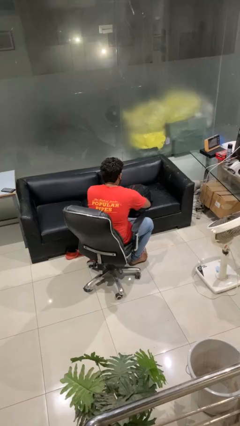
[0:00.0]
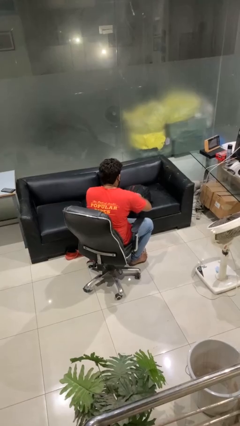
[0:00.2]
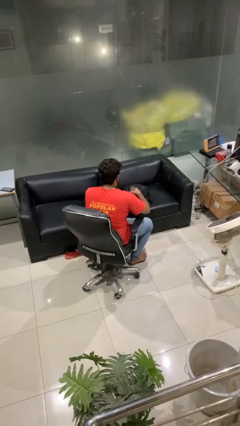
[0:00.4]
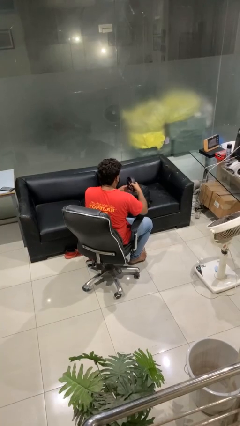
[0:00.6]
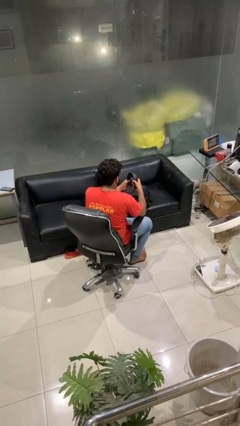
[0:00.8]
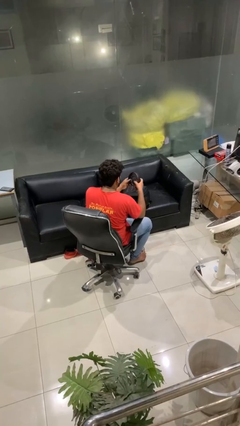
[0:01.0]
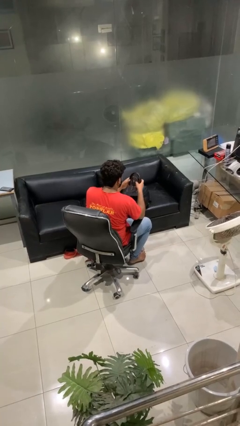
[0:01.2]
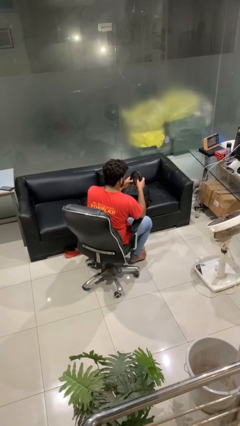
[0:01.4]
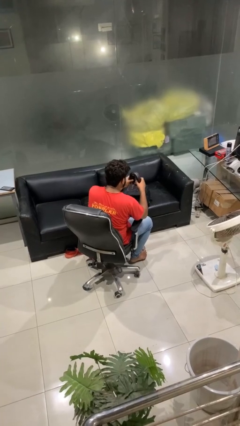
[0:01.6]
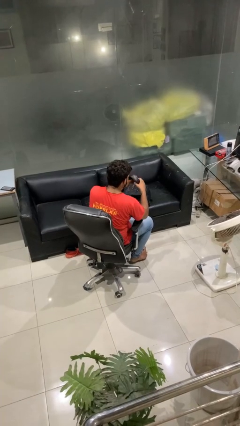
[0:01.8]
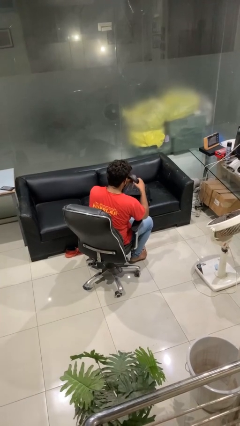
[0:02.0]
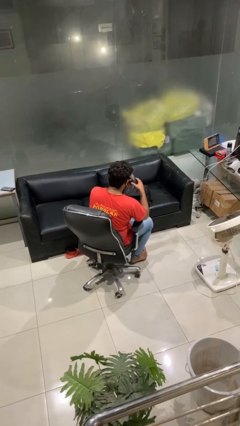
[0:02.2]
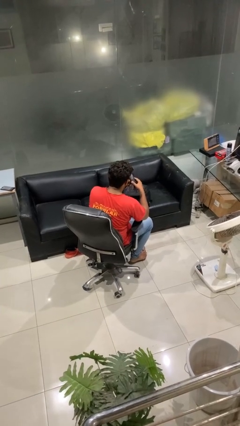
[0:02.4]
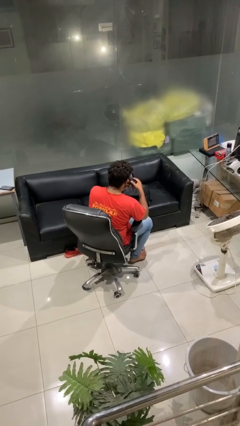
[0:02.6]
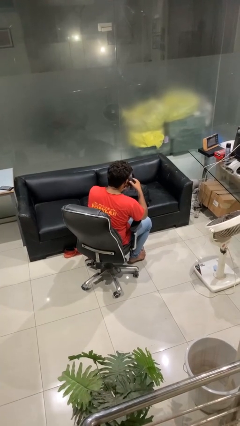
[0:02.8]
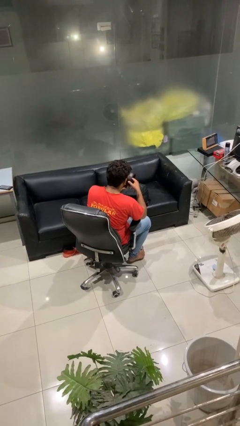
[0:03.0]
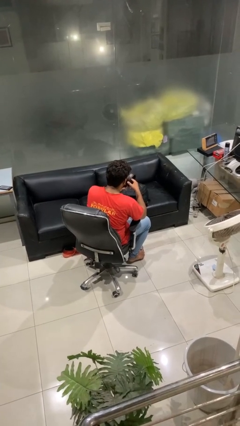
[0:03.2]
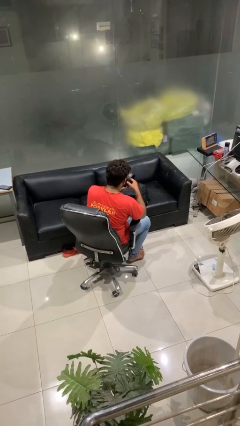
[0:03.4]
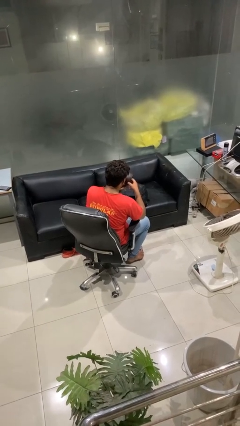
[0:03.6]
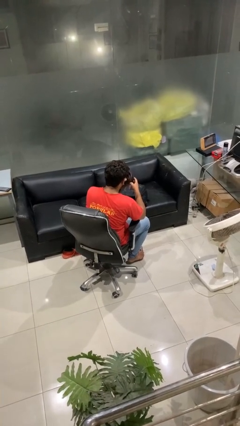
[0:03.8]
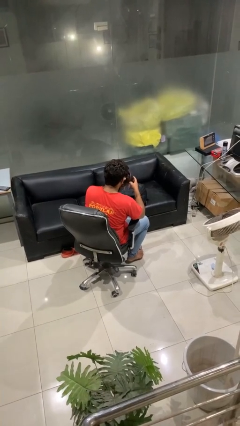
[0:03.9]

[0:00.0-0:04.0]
person takes object from backpack

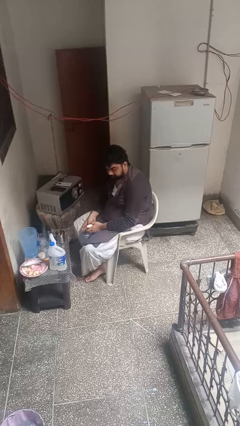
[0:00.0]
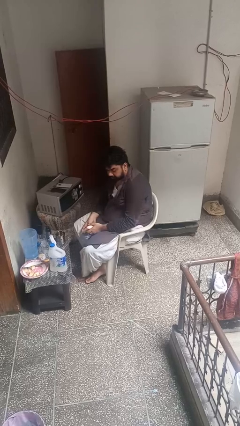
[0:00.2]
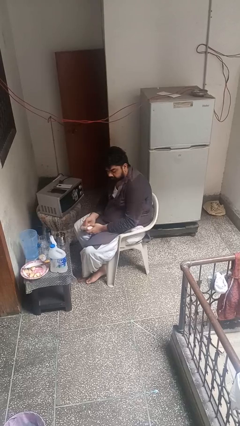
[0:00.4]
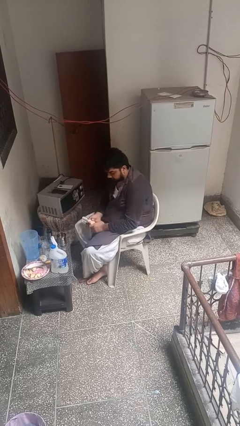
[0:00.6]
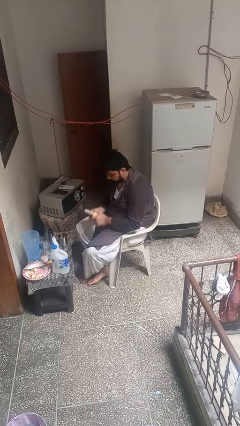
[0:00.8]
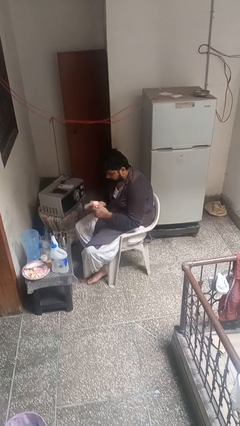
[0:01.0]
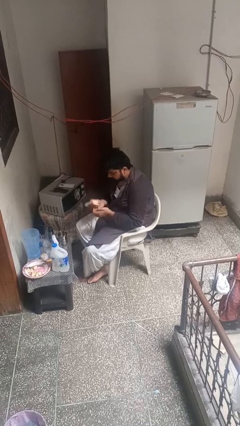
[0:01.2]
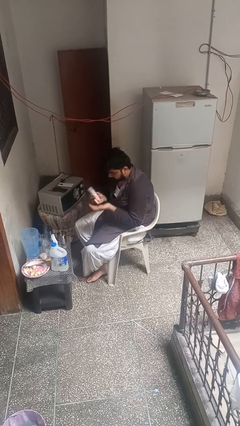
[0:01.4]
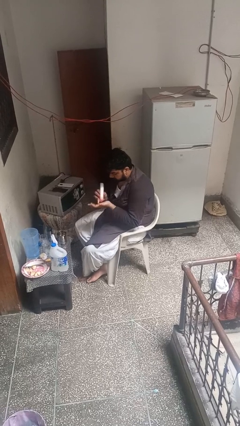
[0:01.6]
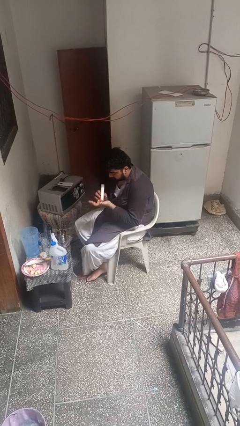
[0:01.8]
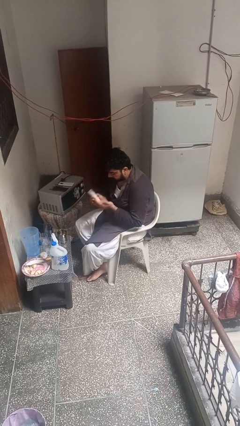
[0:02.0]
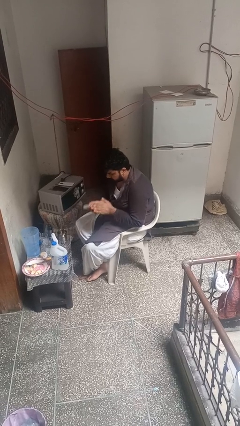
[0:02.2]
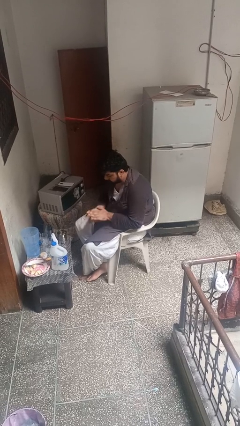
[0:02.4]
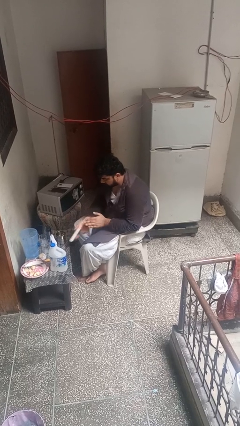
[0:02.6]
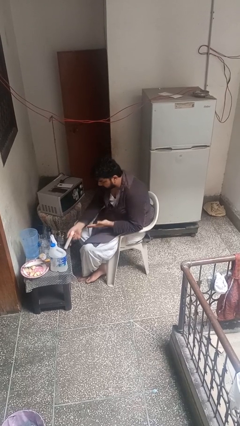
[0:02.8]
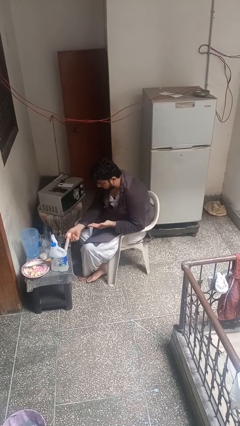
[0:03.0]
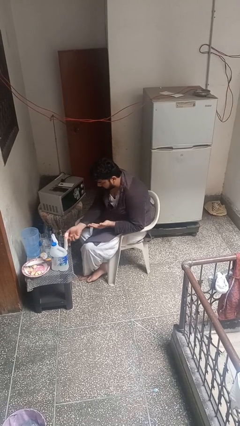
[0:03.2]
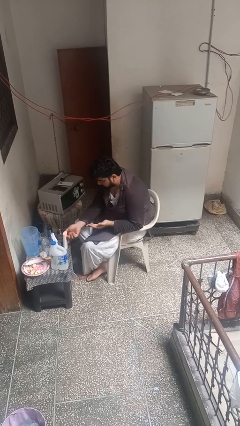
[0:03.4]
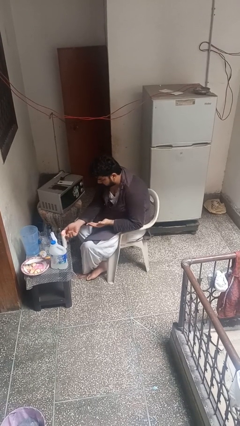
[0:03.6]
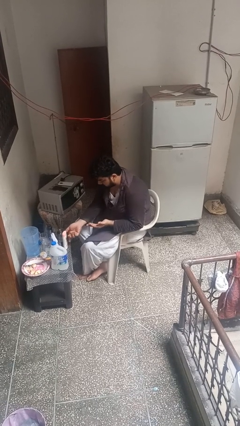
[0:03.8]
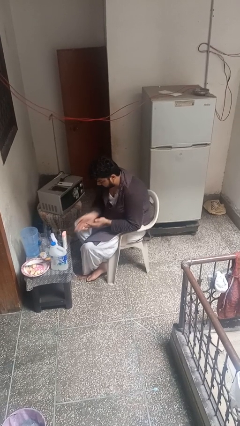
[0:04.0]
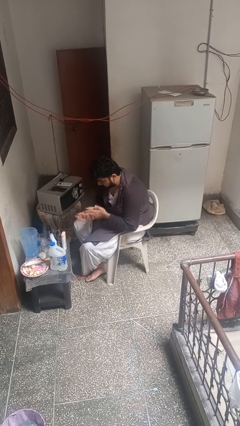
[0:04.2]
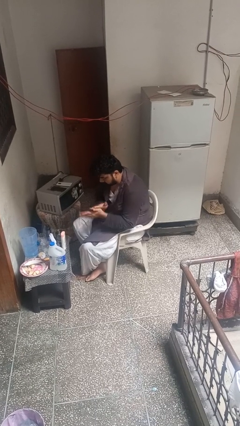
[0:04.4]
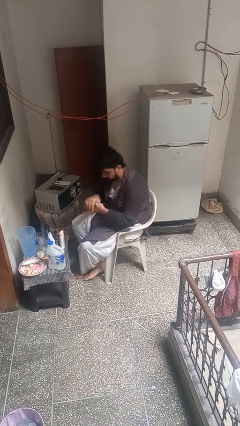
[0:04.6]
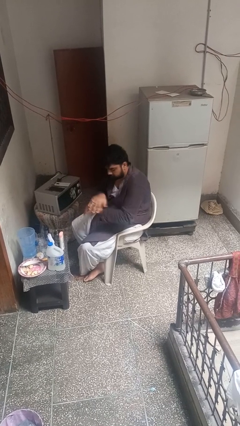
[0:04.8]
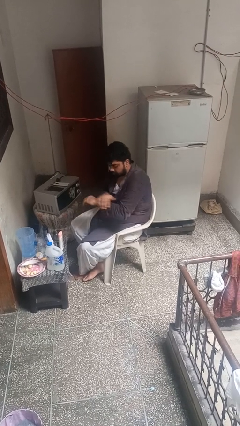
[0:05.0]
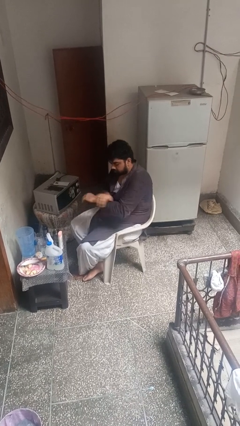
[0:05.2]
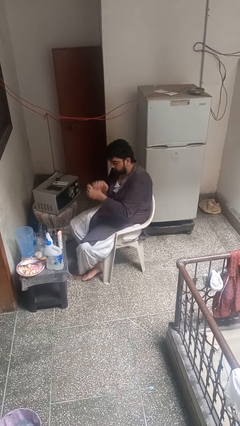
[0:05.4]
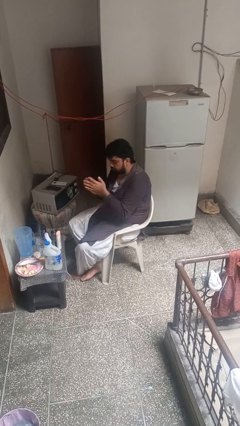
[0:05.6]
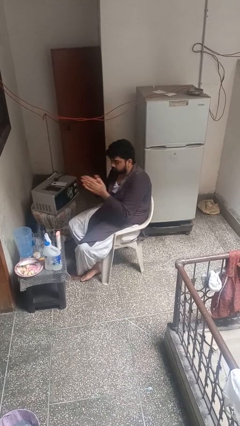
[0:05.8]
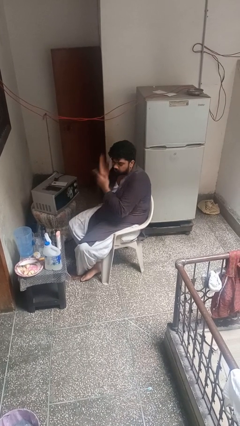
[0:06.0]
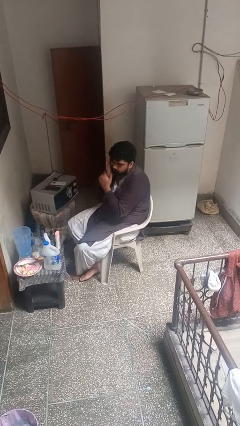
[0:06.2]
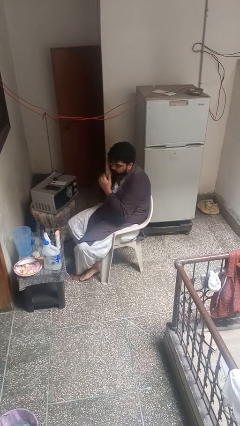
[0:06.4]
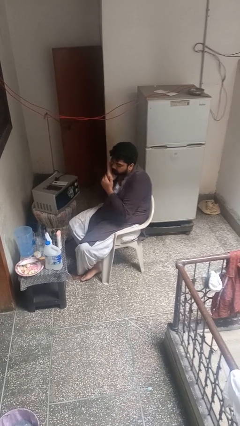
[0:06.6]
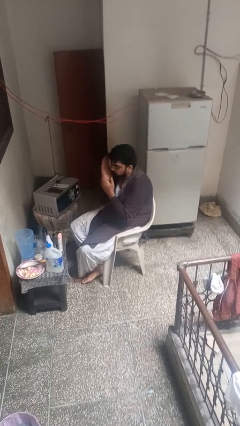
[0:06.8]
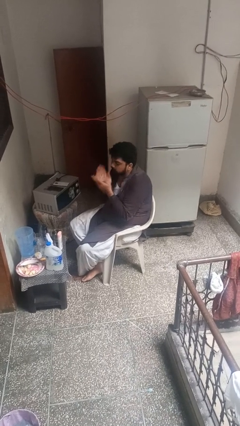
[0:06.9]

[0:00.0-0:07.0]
person applies facial moisturizer

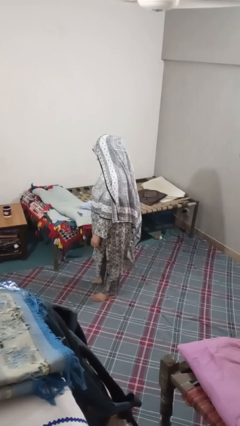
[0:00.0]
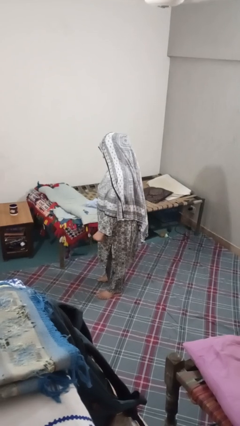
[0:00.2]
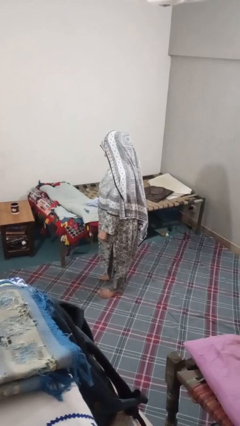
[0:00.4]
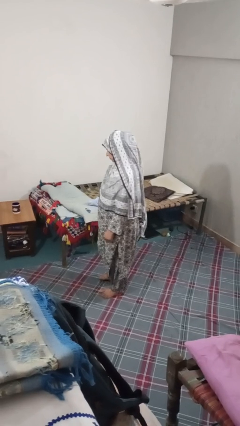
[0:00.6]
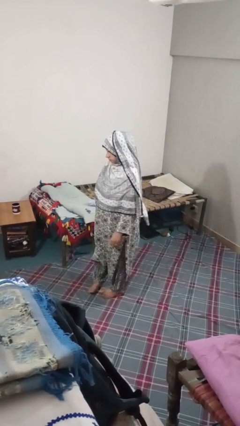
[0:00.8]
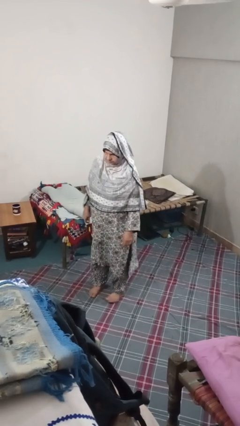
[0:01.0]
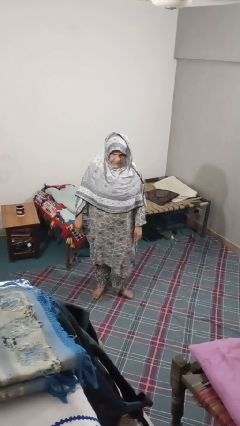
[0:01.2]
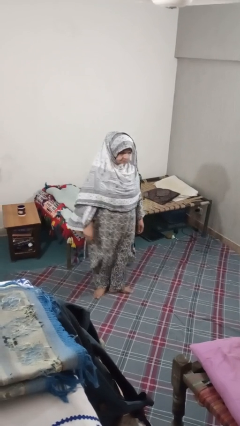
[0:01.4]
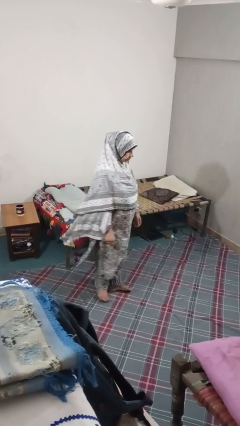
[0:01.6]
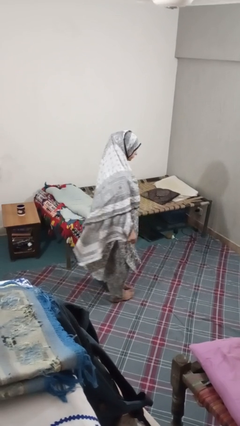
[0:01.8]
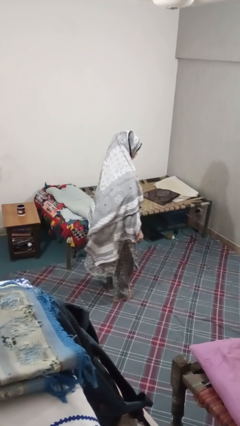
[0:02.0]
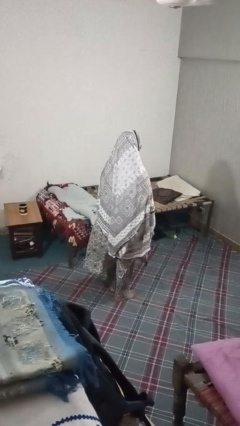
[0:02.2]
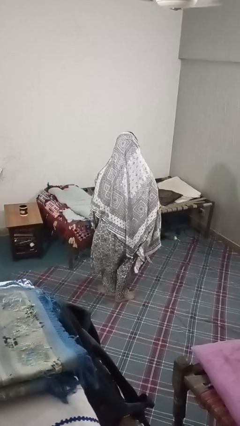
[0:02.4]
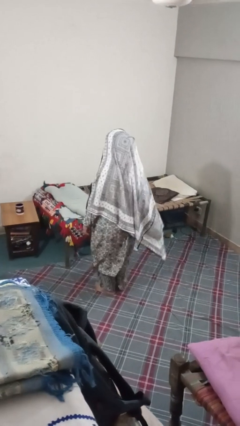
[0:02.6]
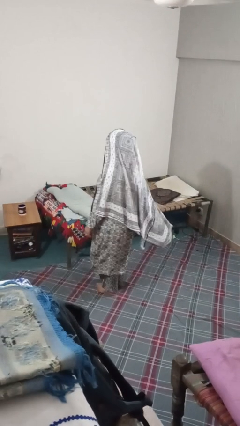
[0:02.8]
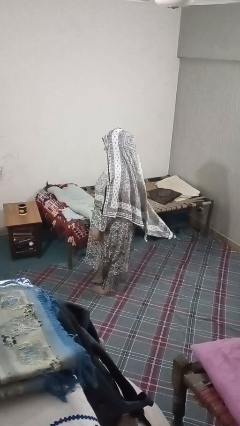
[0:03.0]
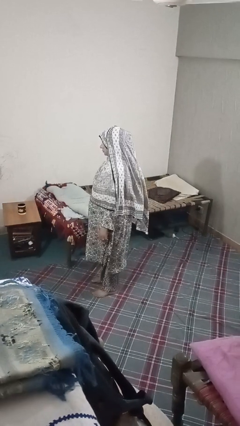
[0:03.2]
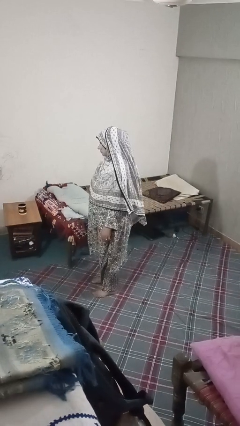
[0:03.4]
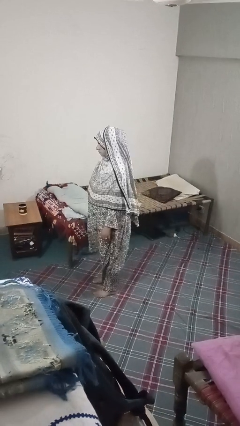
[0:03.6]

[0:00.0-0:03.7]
person twirls

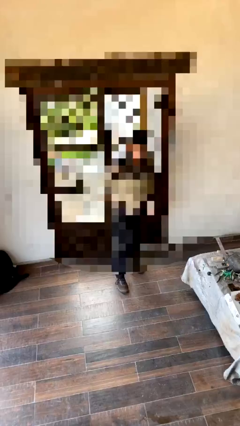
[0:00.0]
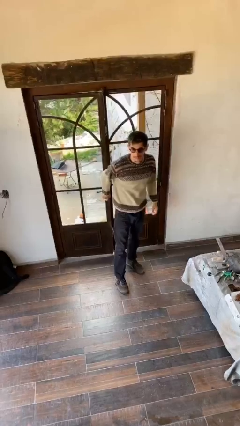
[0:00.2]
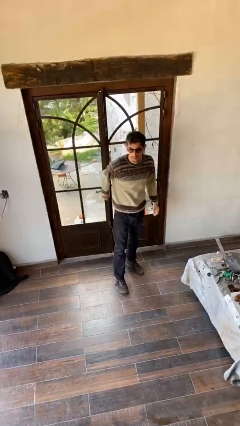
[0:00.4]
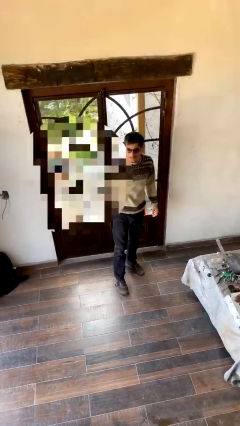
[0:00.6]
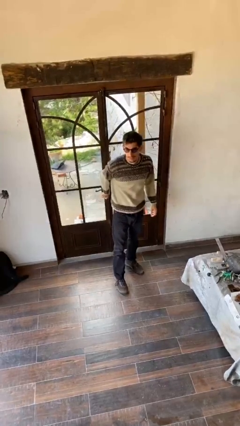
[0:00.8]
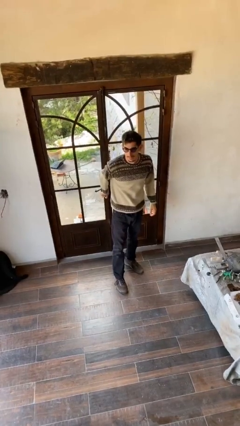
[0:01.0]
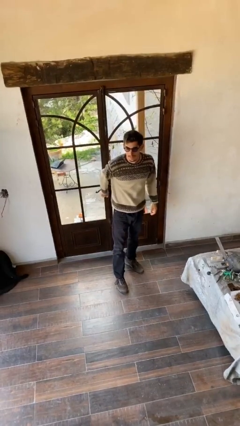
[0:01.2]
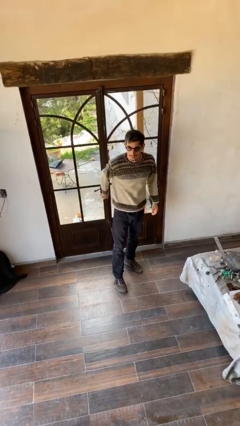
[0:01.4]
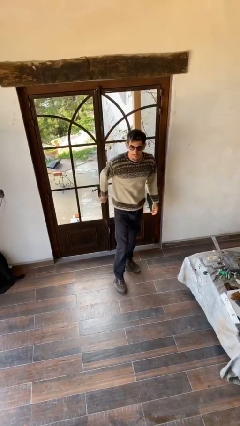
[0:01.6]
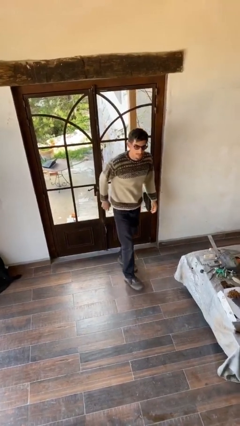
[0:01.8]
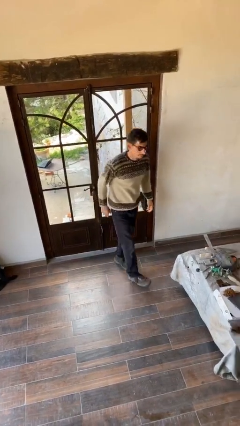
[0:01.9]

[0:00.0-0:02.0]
person closes facility door

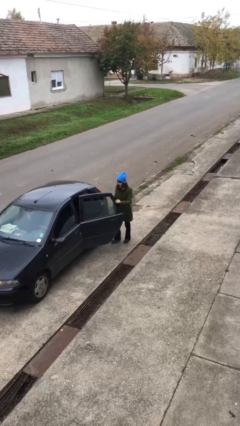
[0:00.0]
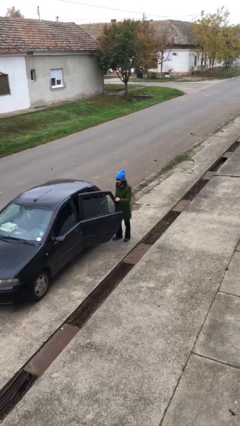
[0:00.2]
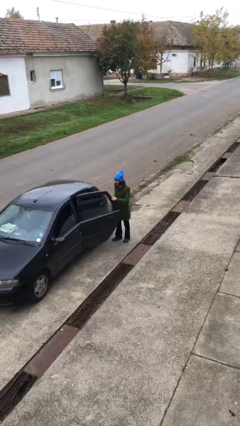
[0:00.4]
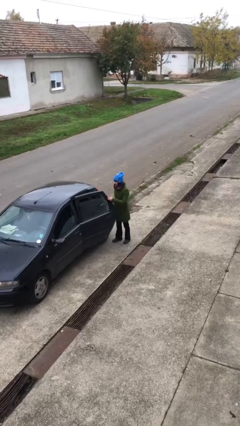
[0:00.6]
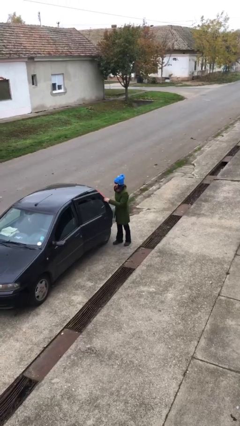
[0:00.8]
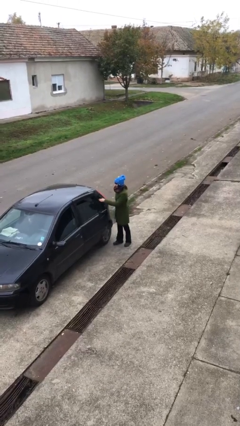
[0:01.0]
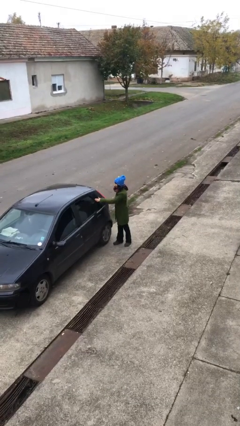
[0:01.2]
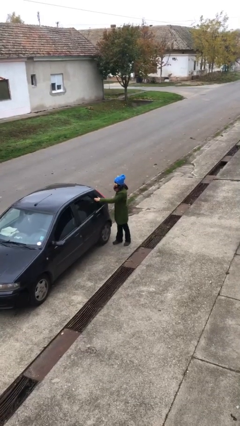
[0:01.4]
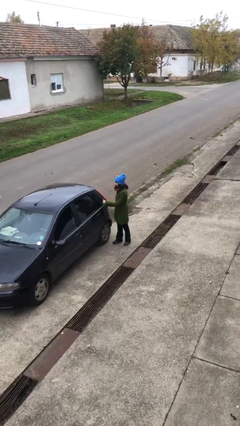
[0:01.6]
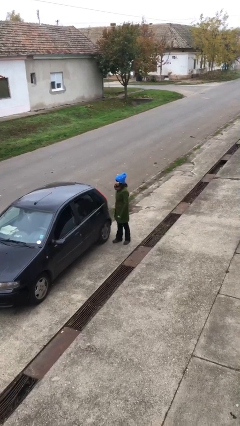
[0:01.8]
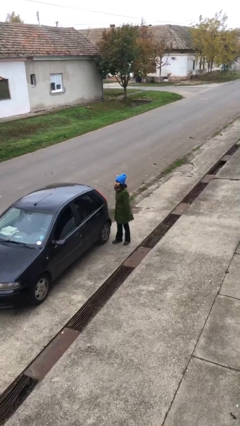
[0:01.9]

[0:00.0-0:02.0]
person closes car door
